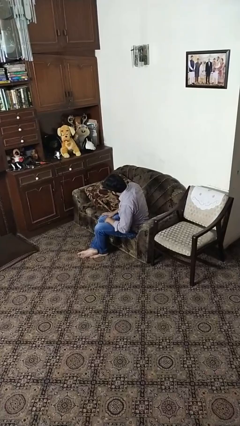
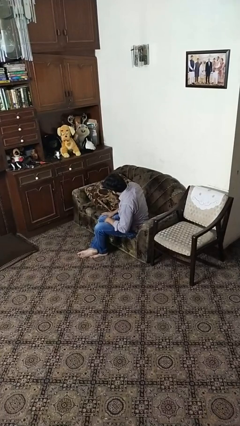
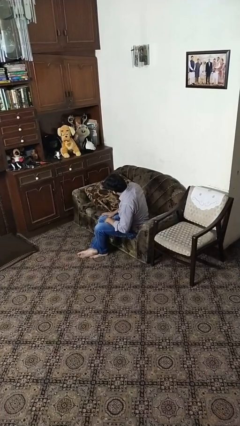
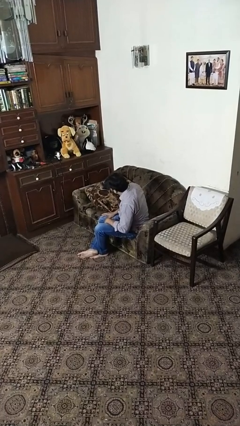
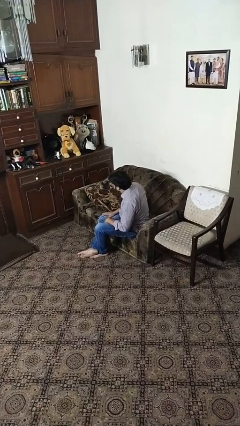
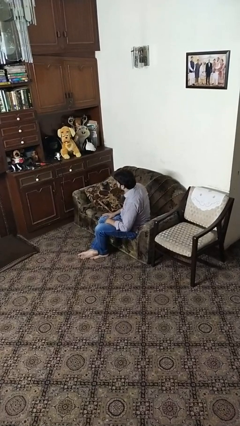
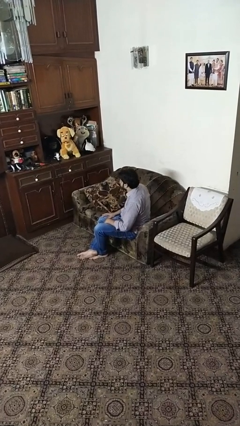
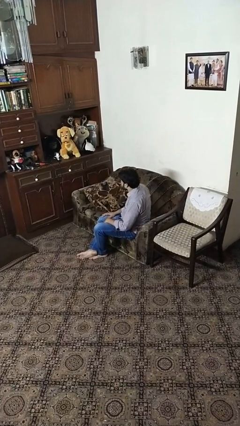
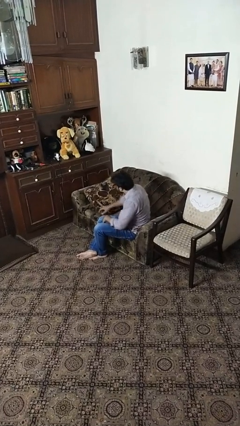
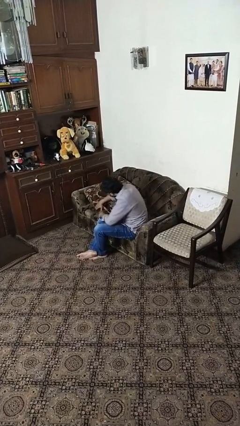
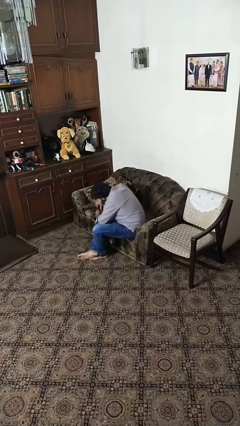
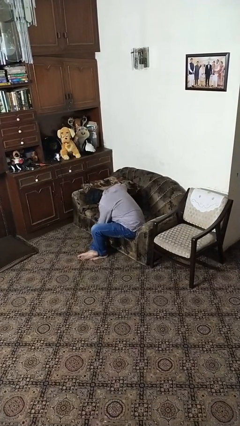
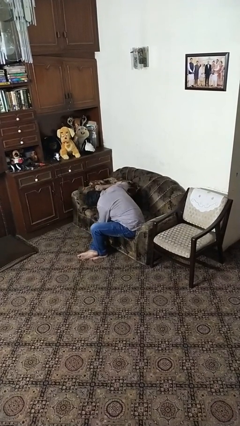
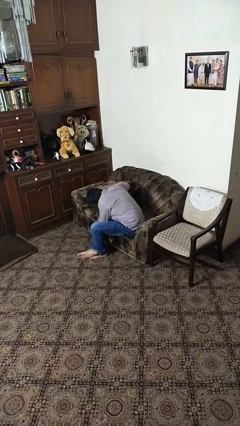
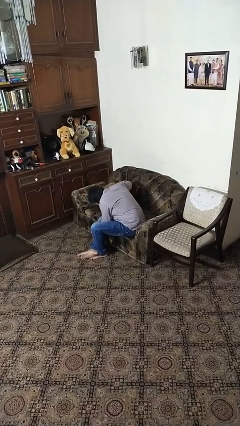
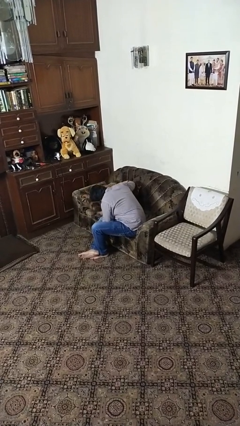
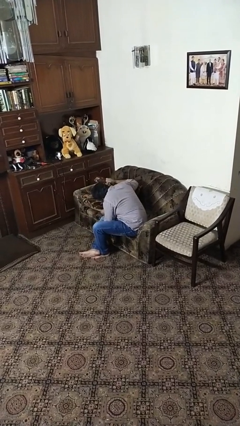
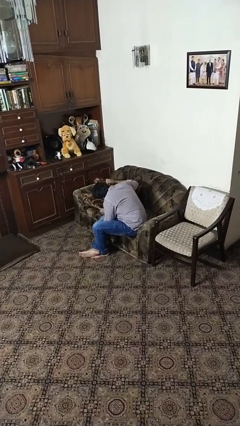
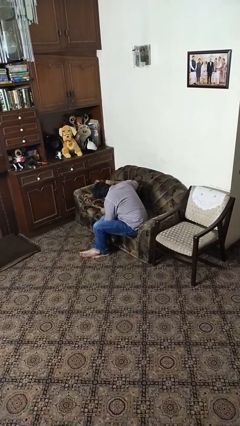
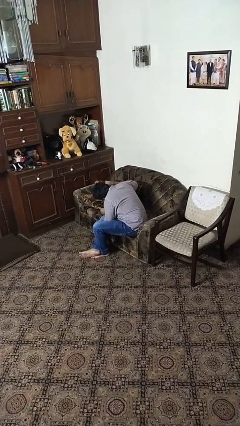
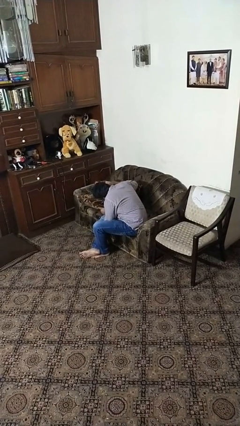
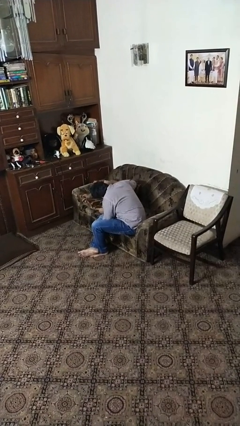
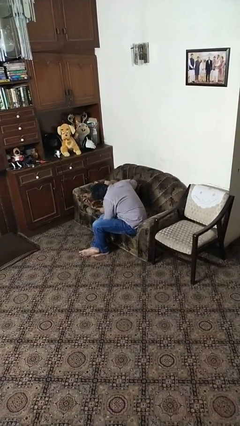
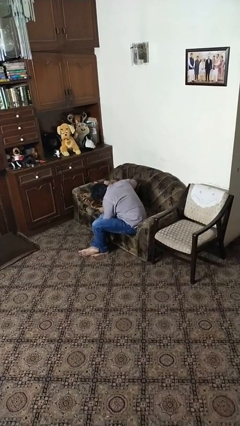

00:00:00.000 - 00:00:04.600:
person searches in couch

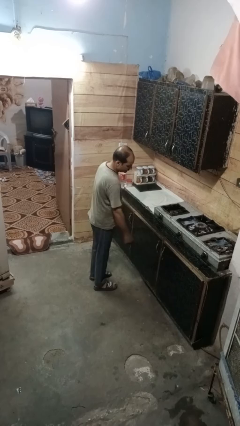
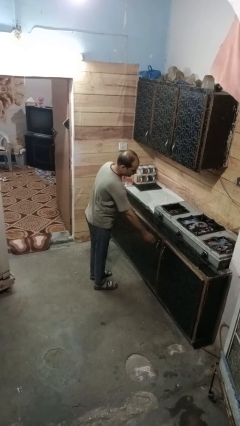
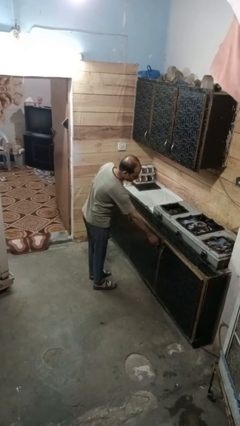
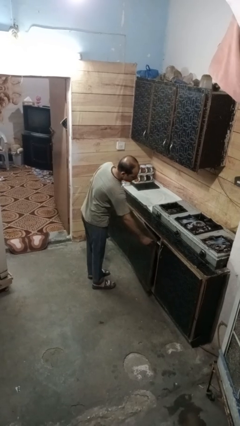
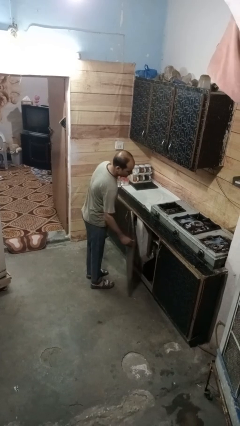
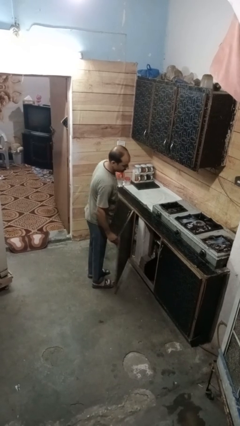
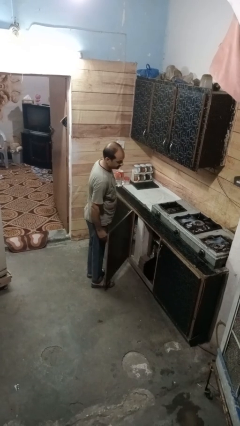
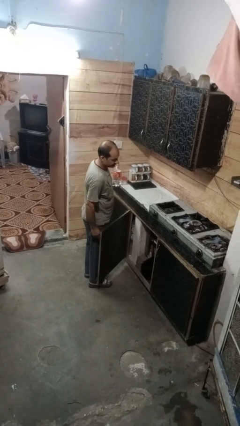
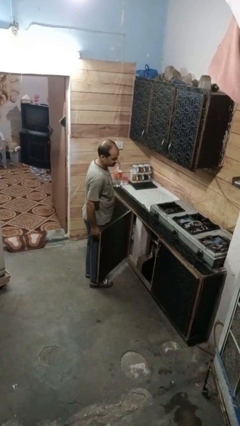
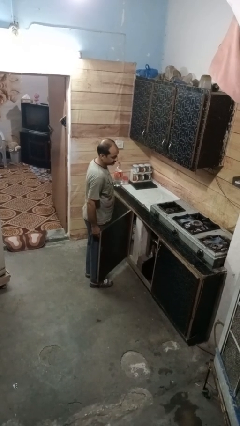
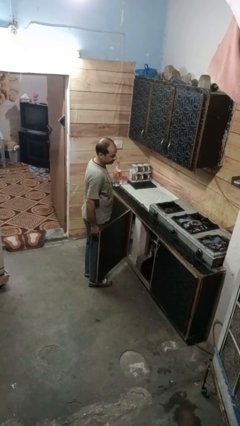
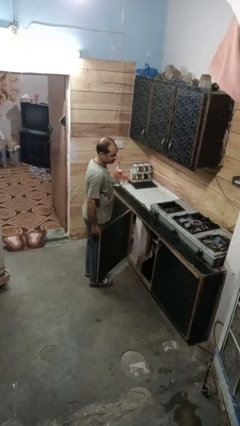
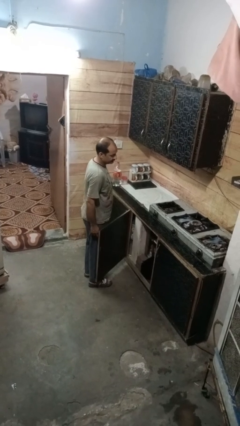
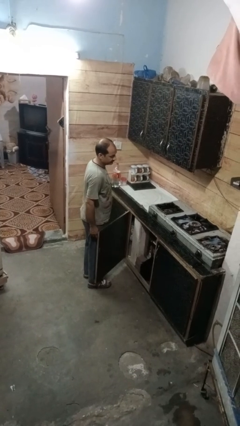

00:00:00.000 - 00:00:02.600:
person opens cabinet

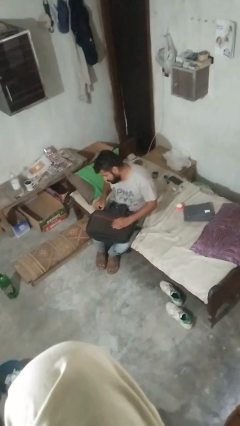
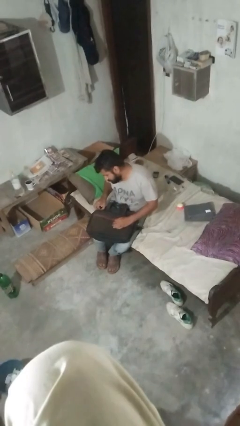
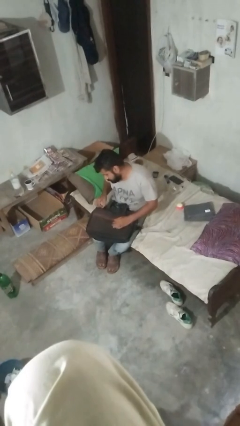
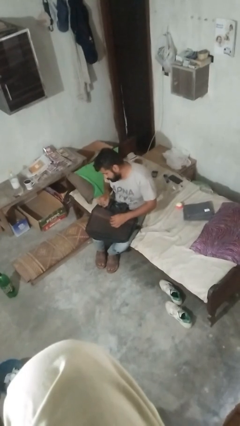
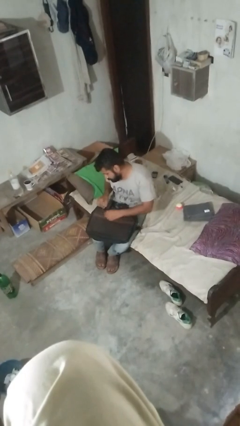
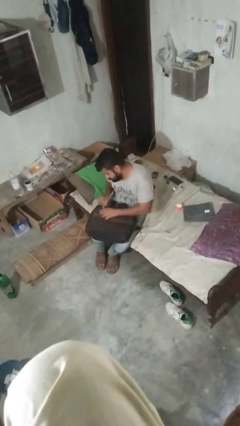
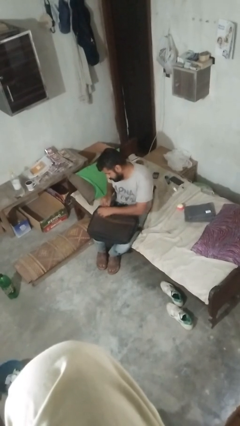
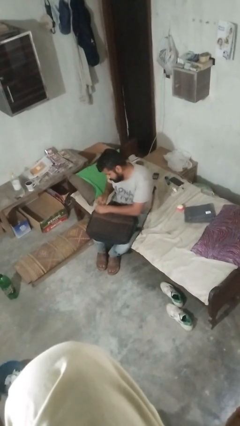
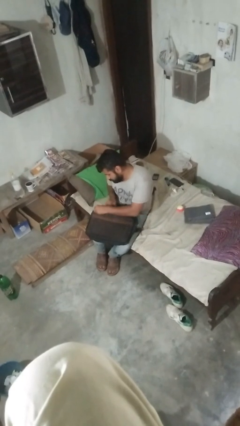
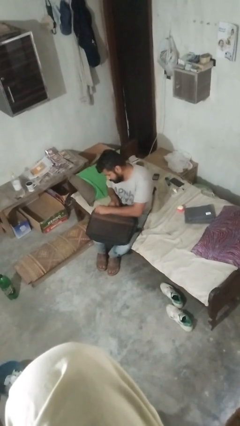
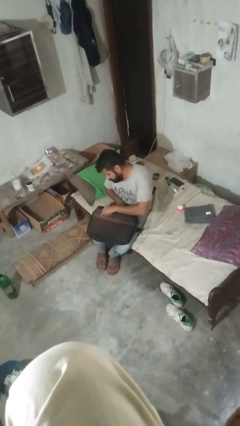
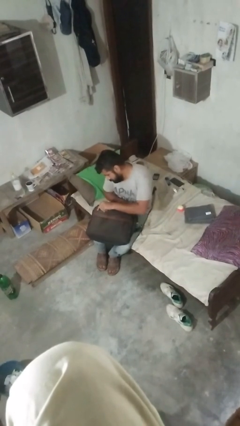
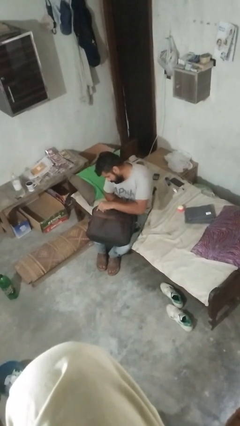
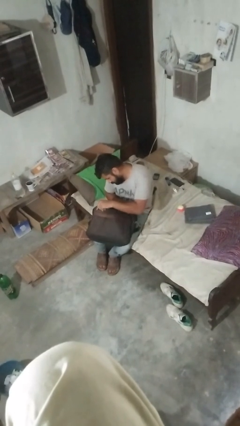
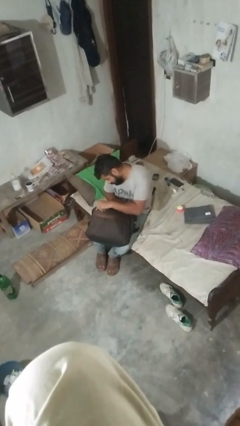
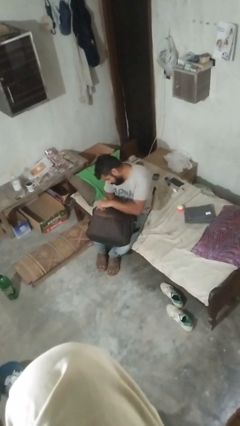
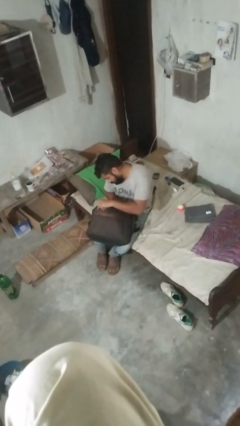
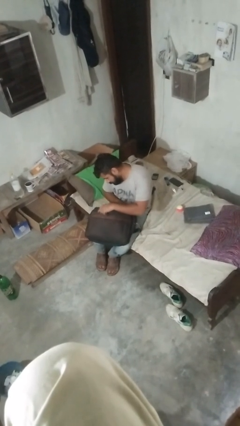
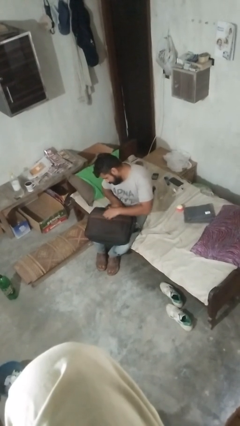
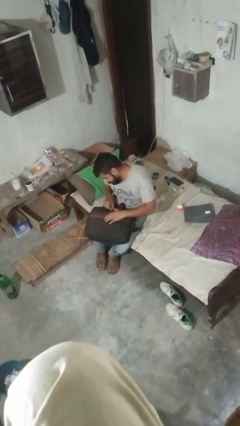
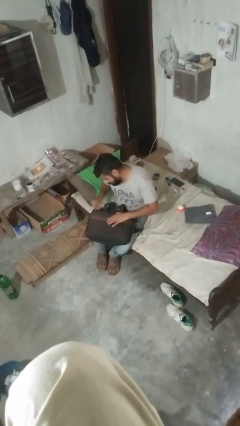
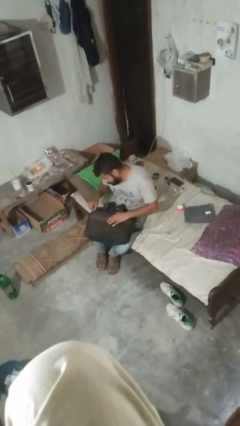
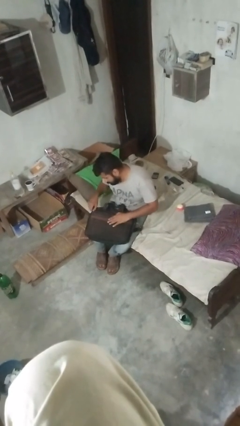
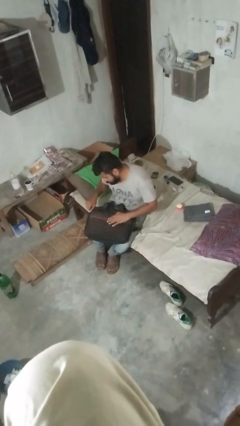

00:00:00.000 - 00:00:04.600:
person searches in bag

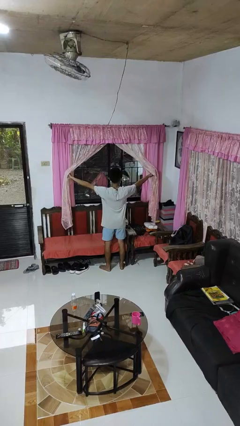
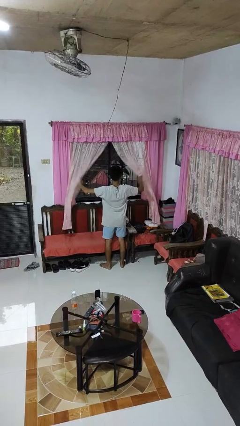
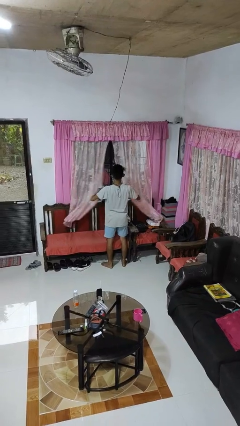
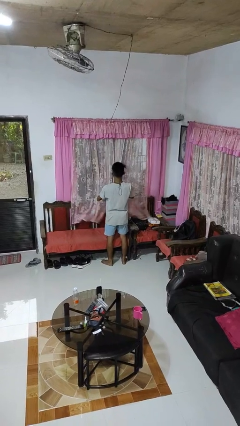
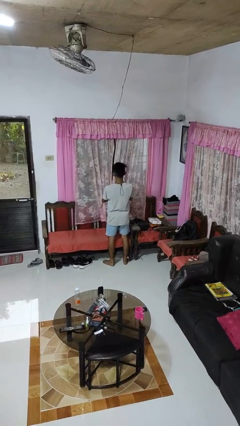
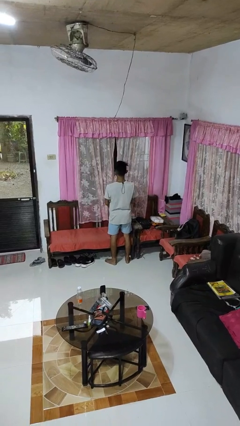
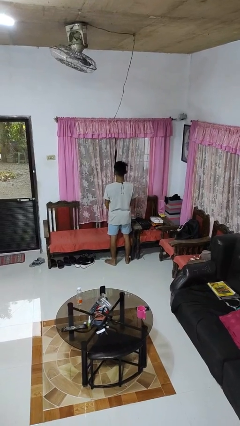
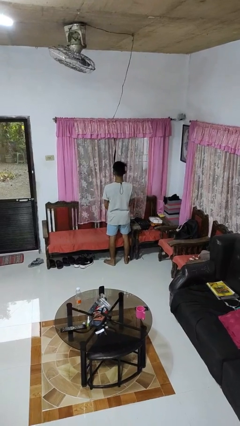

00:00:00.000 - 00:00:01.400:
person closes curtains

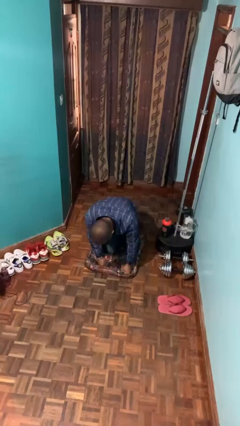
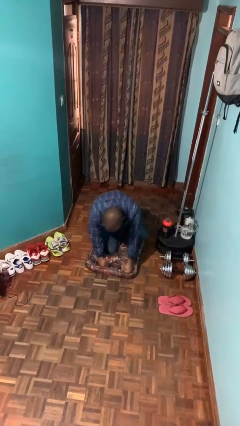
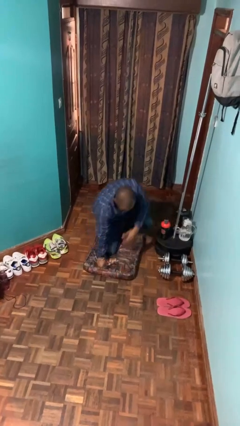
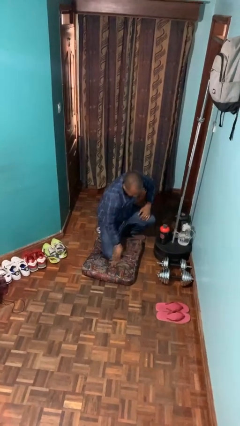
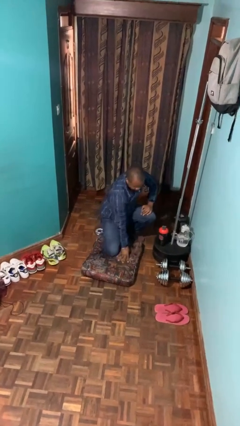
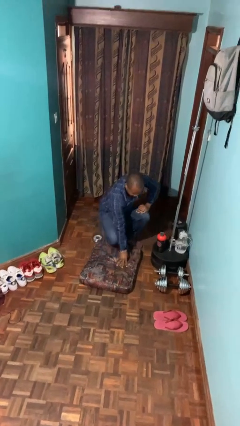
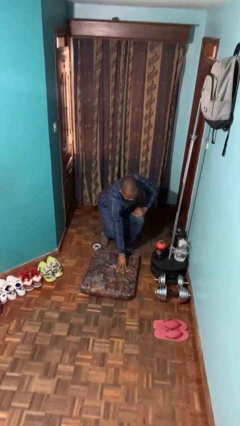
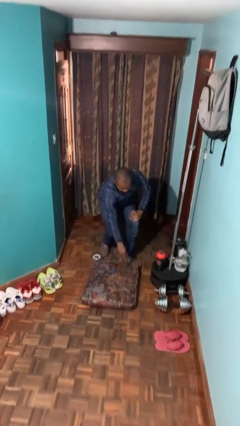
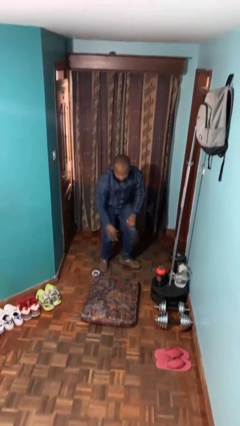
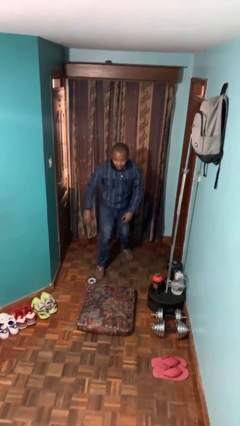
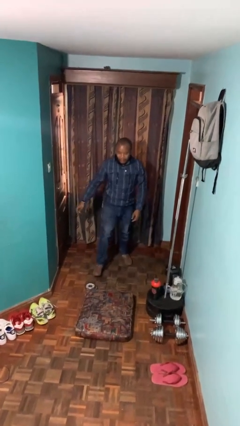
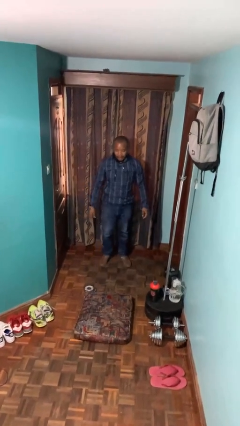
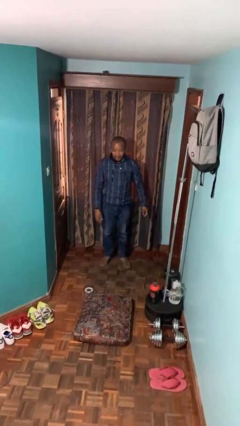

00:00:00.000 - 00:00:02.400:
person stands up from floor

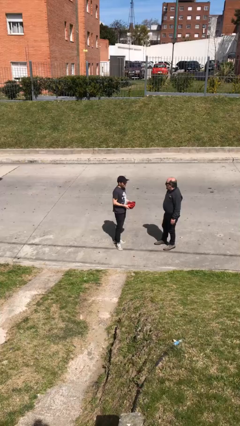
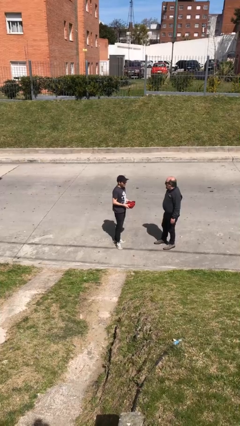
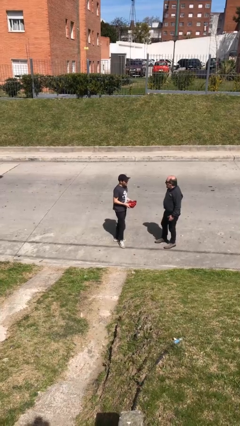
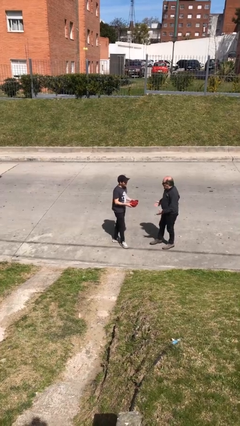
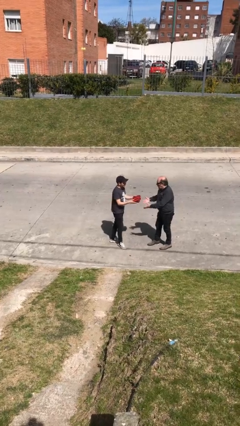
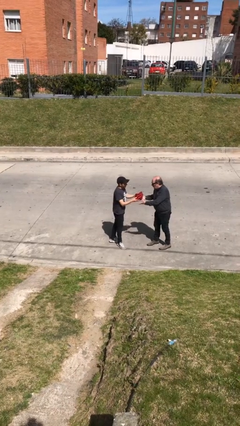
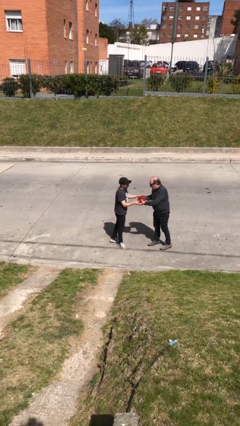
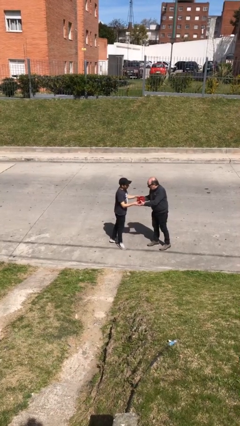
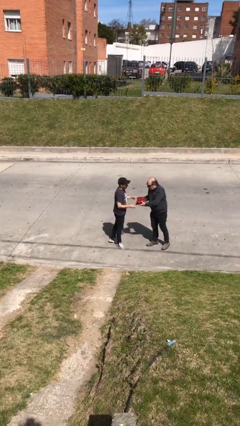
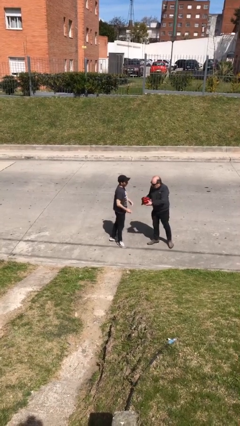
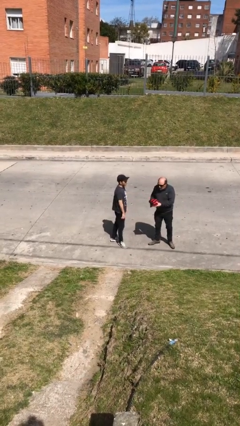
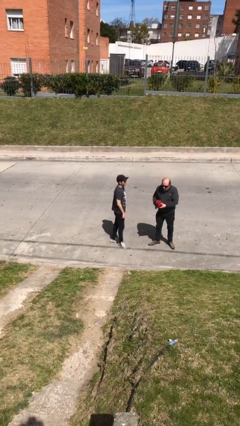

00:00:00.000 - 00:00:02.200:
person transfers object to person
